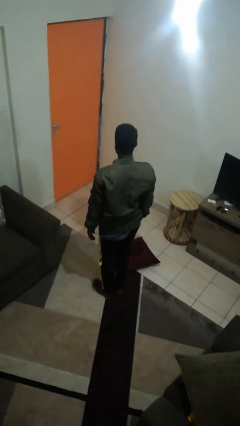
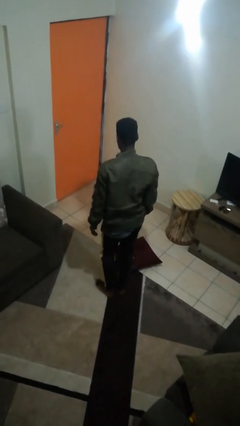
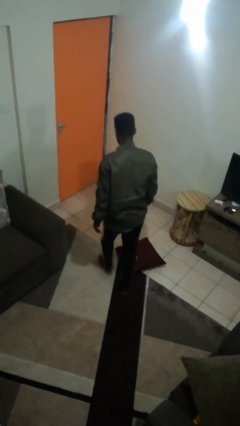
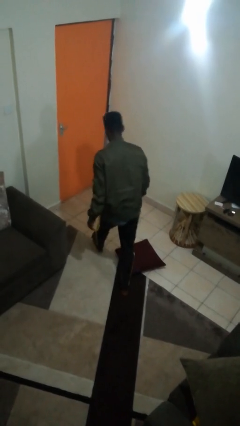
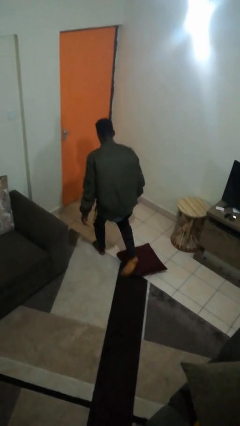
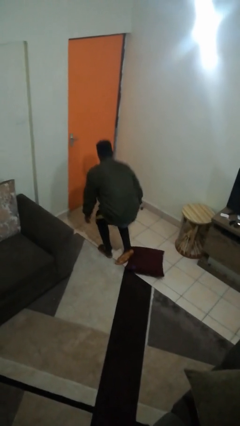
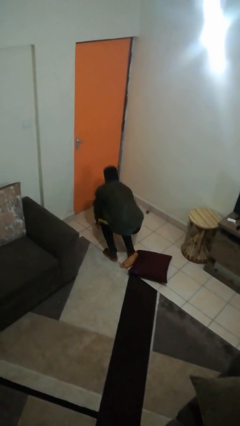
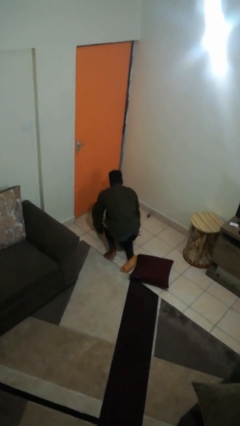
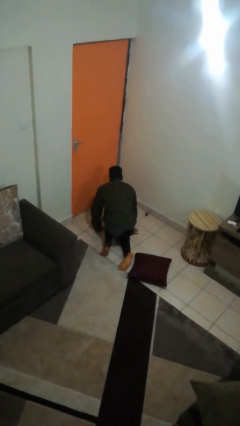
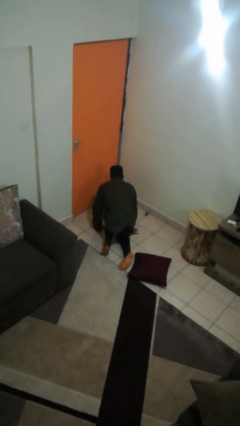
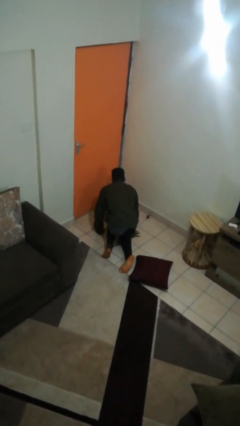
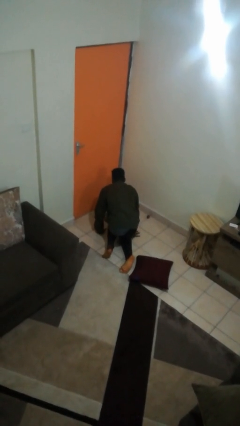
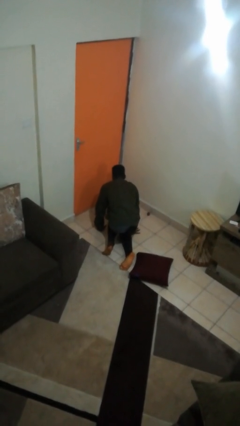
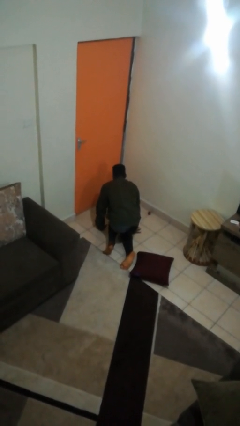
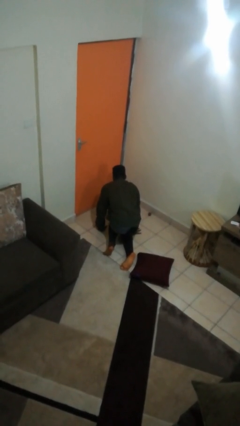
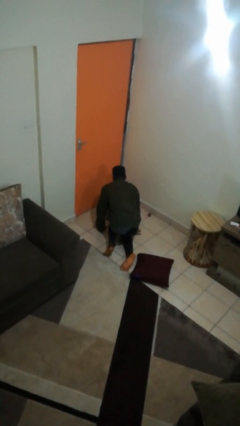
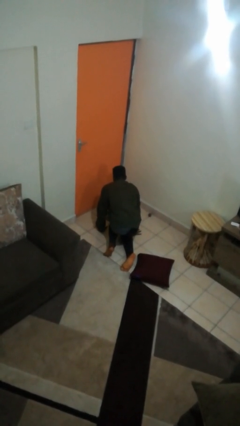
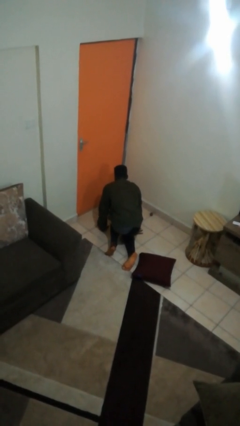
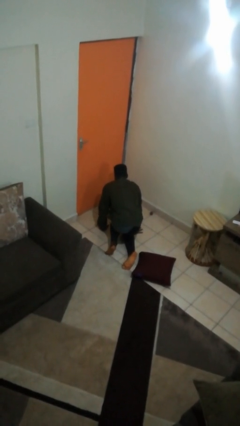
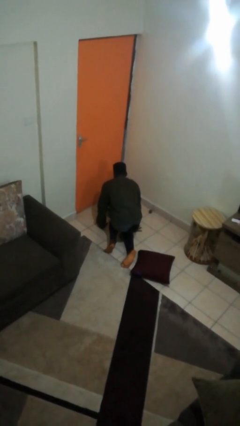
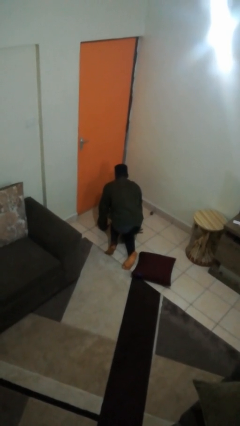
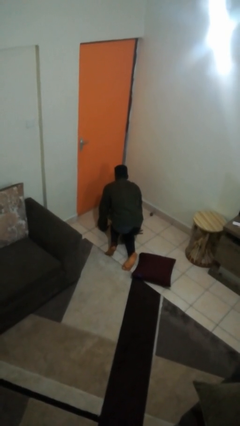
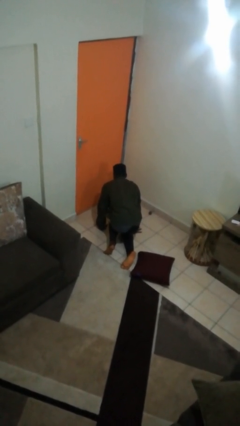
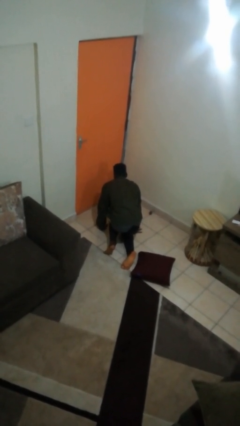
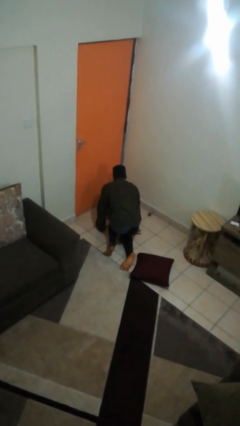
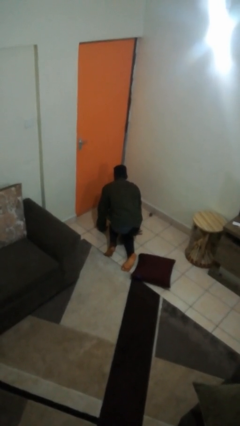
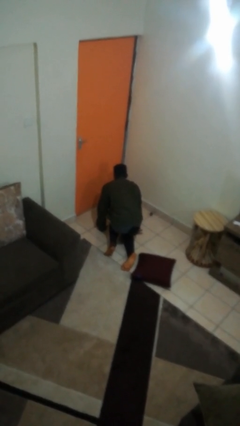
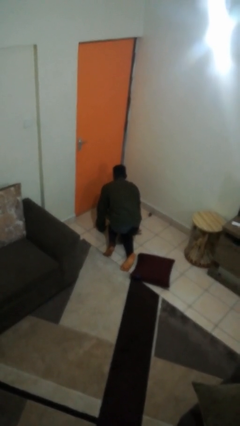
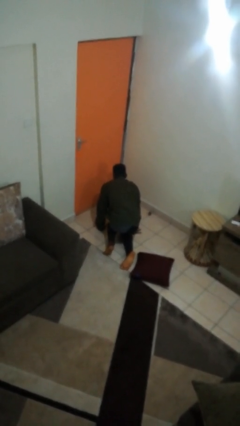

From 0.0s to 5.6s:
person trips on object on floor

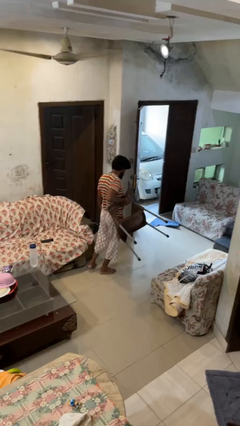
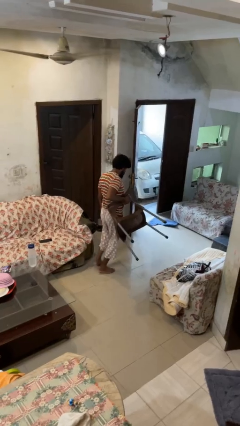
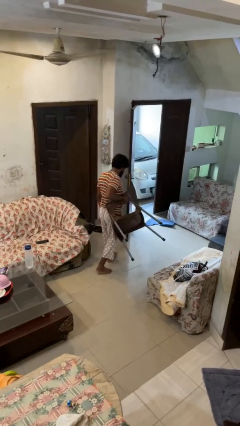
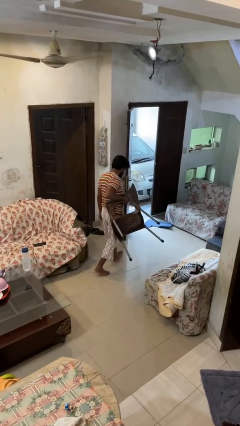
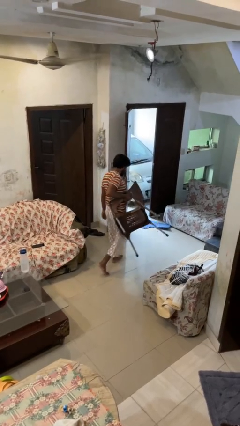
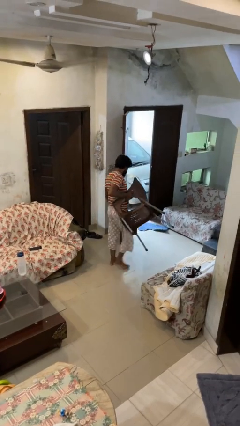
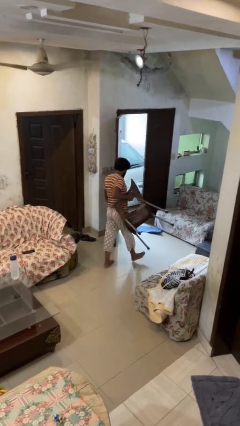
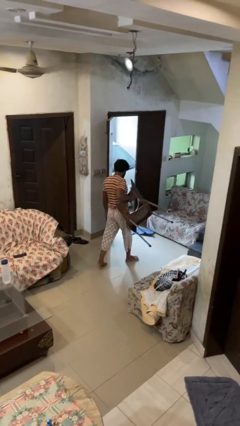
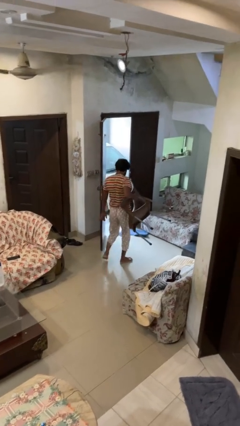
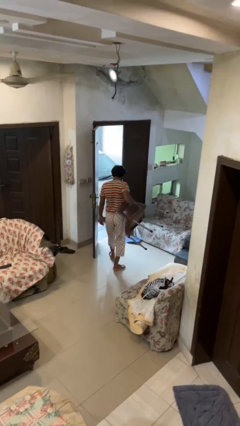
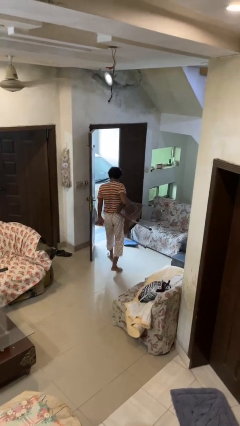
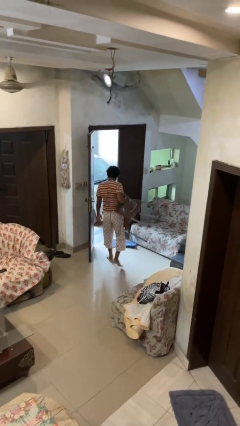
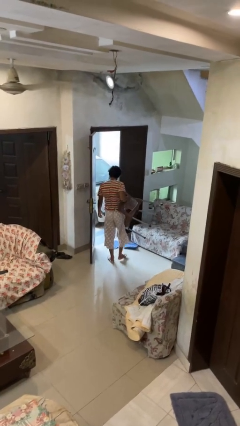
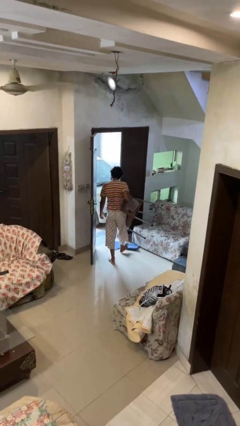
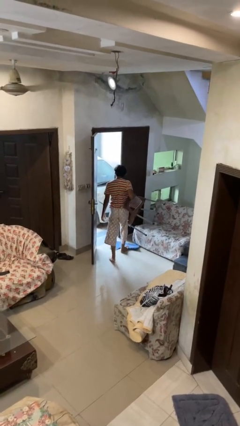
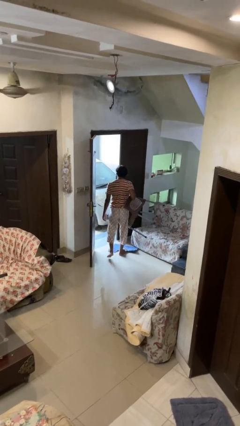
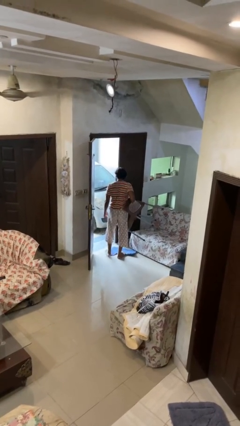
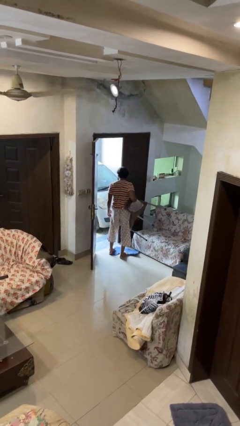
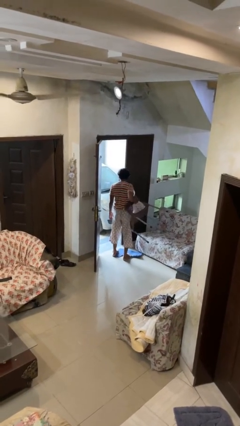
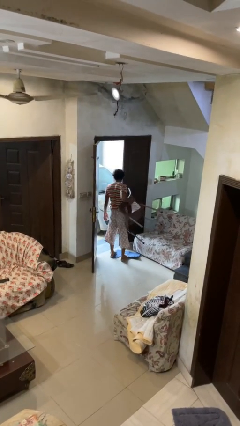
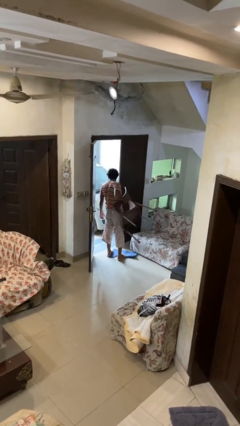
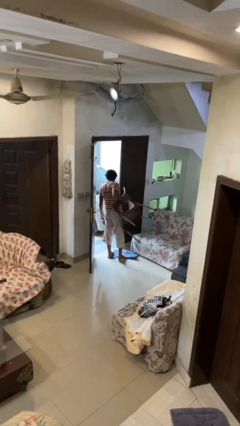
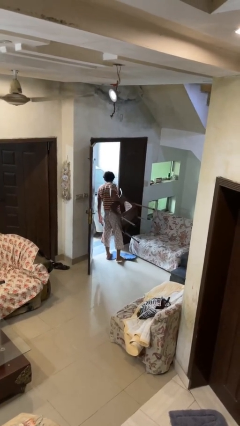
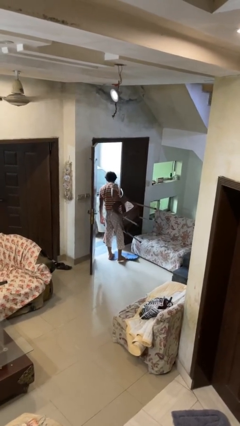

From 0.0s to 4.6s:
person carries furniture

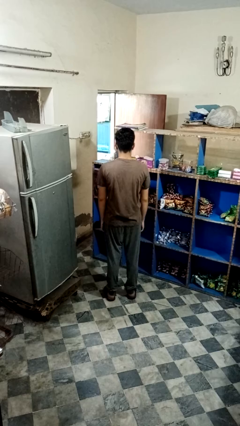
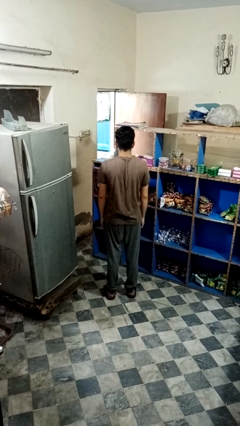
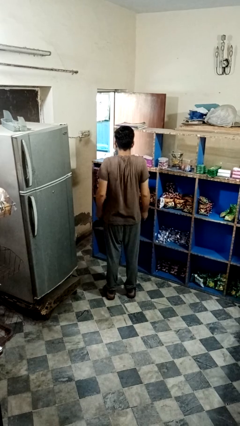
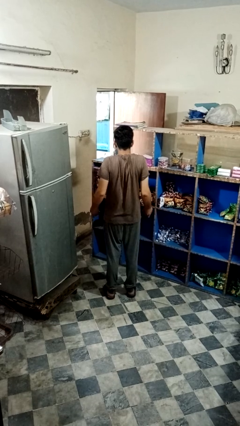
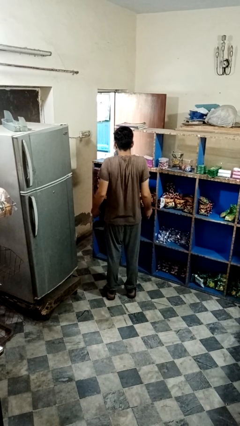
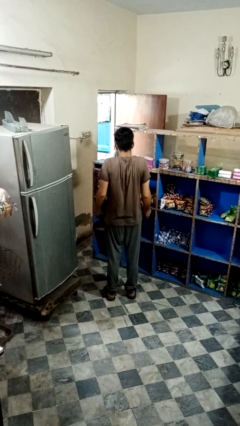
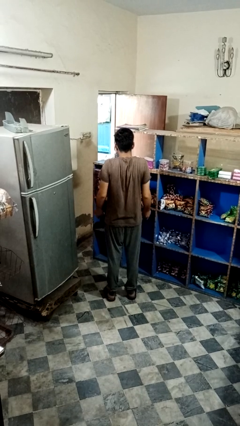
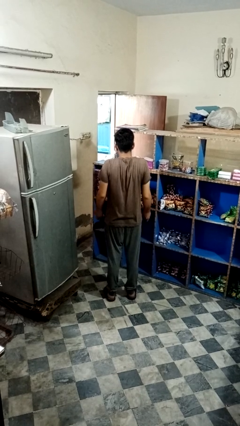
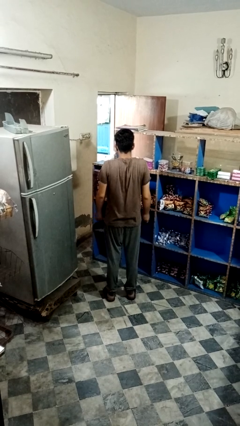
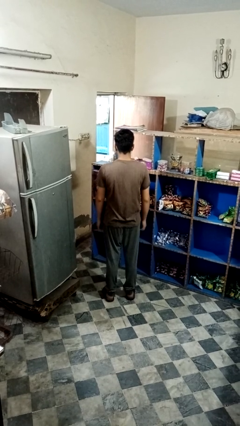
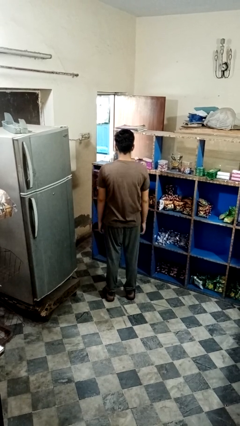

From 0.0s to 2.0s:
person shrugs

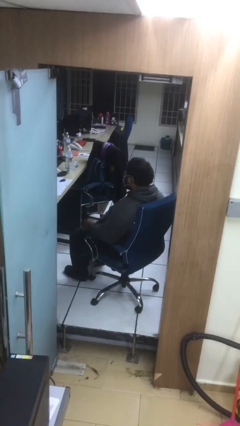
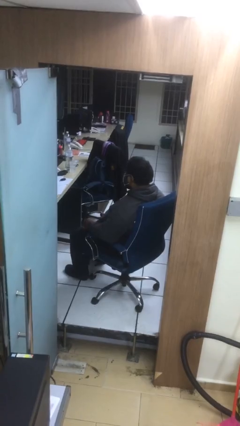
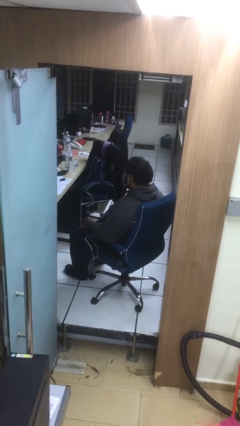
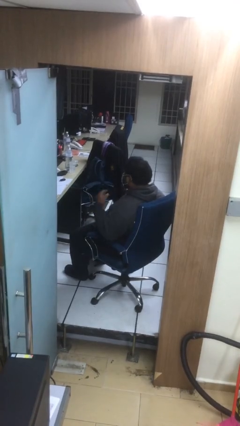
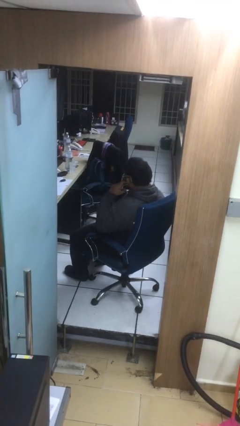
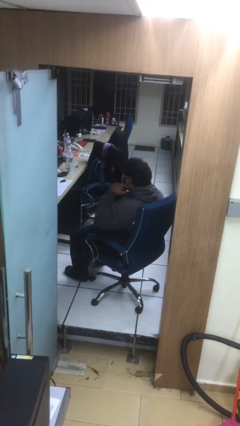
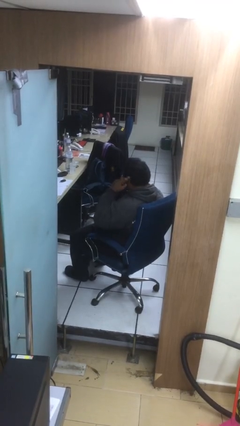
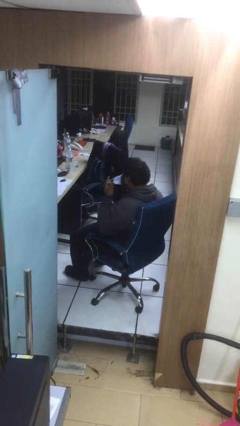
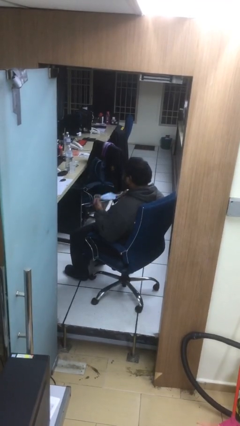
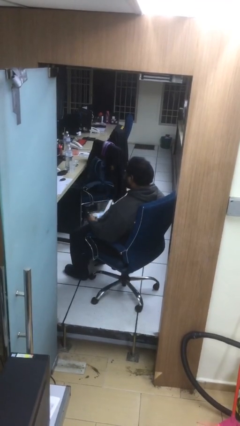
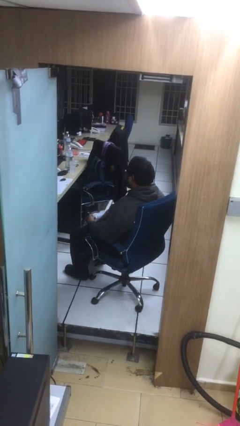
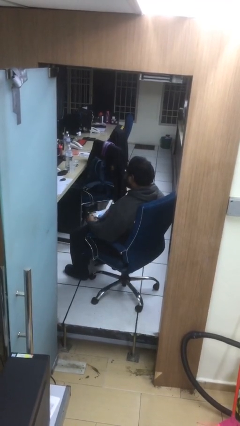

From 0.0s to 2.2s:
person takes off facemask

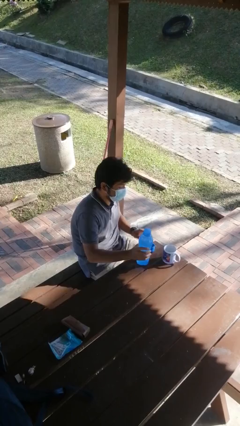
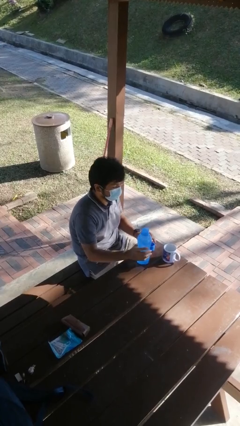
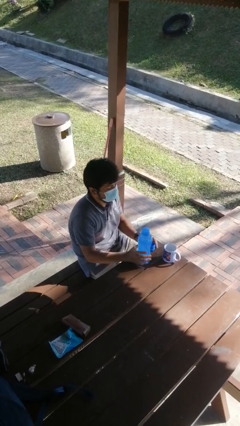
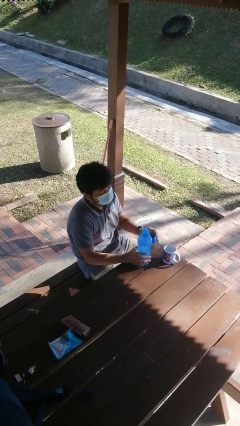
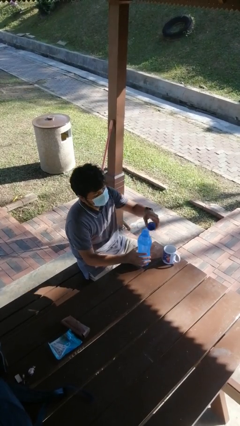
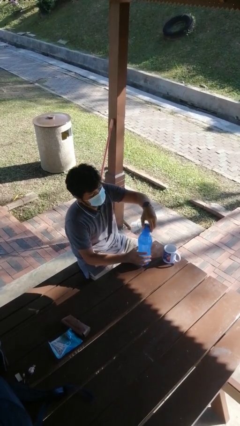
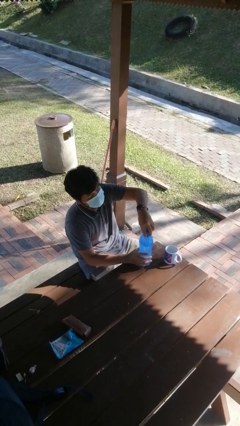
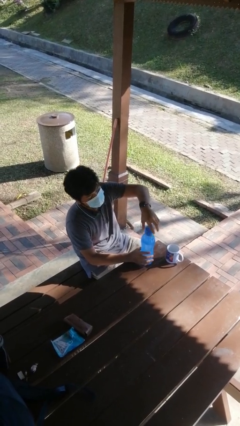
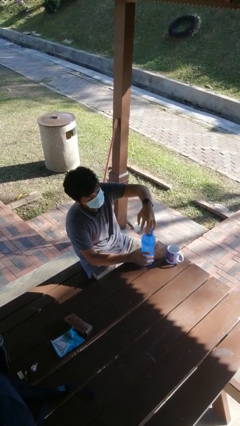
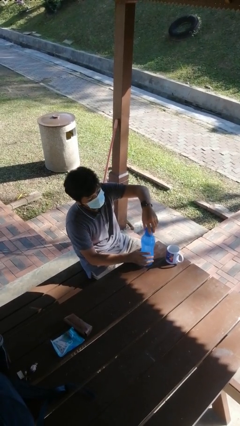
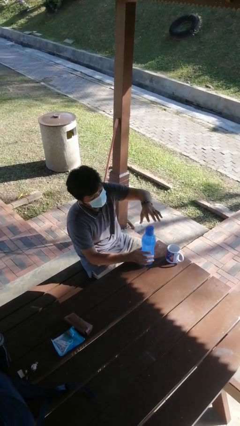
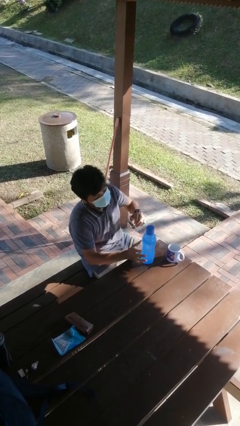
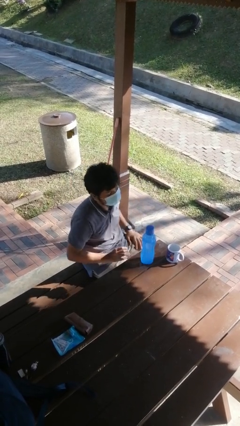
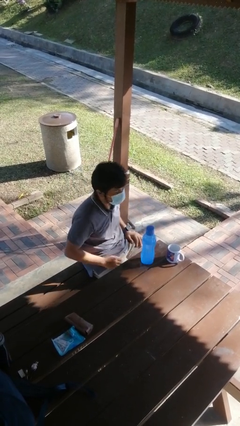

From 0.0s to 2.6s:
person screws lid to bottle

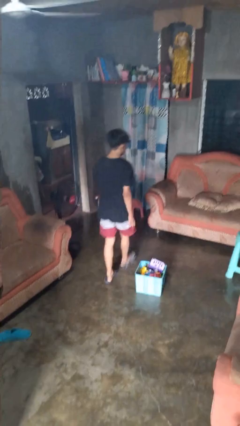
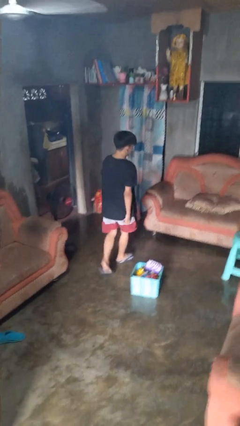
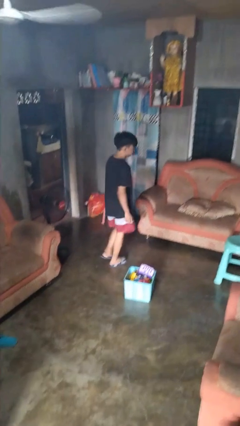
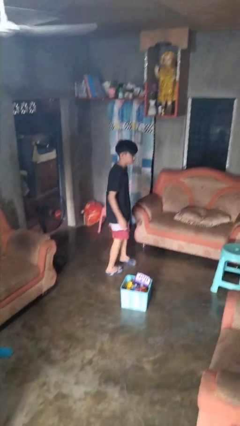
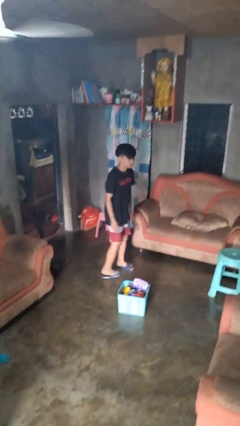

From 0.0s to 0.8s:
person stands up from floor
